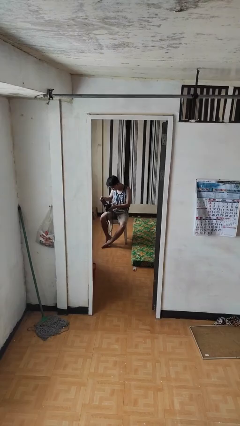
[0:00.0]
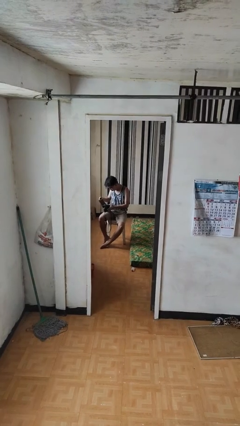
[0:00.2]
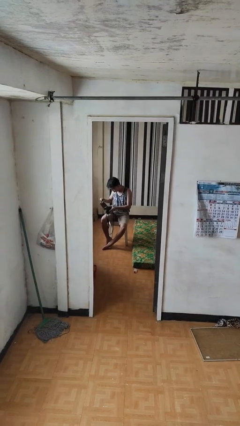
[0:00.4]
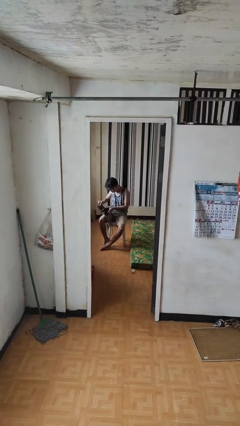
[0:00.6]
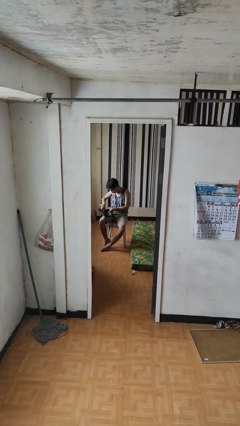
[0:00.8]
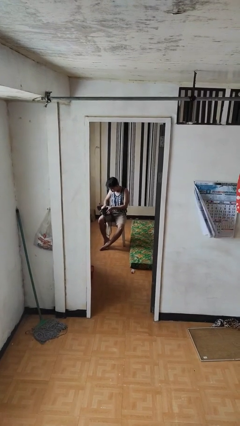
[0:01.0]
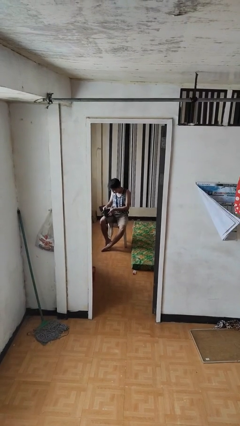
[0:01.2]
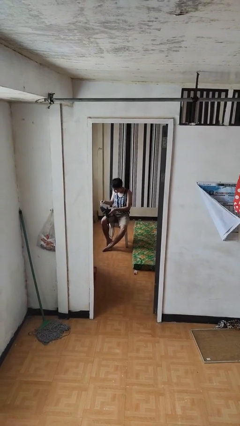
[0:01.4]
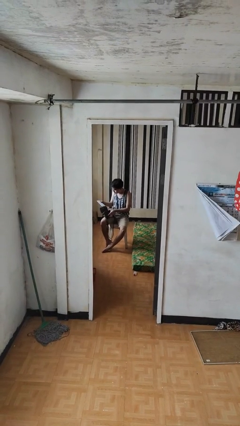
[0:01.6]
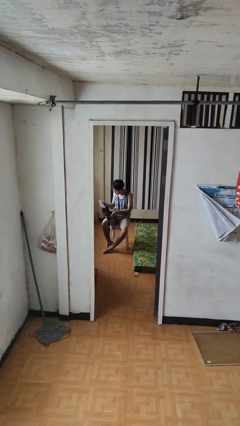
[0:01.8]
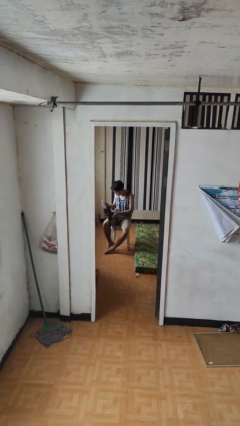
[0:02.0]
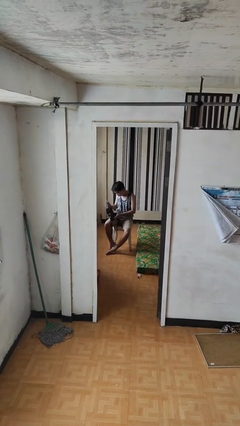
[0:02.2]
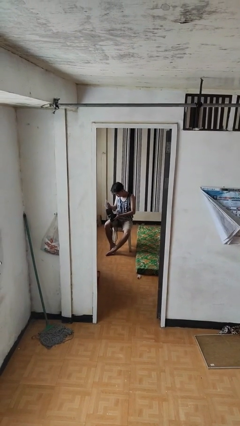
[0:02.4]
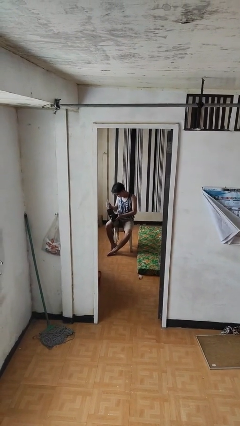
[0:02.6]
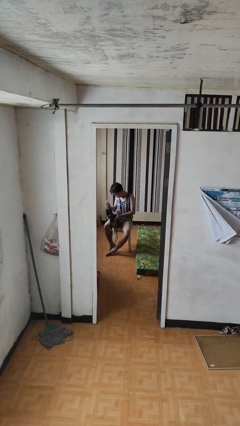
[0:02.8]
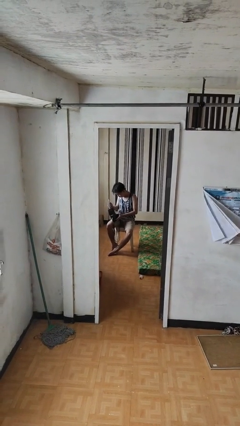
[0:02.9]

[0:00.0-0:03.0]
person takes object from purse

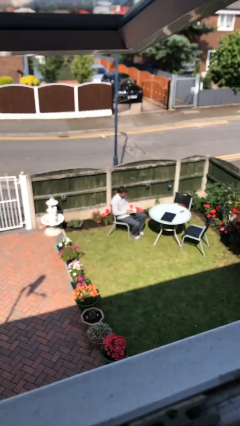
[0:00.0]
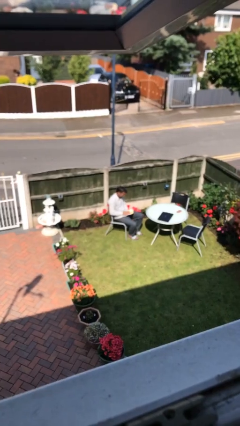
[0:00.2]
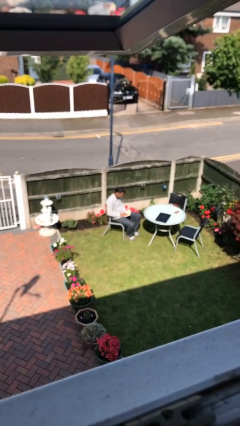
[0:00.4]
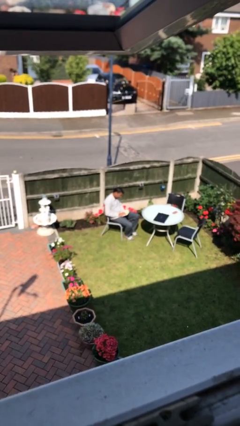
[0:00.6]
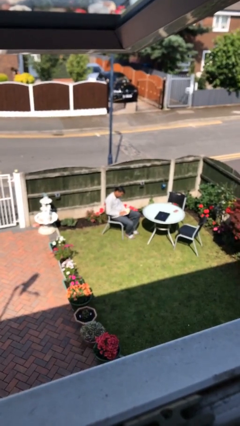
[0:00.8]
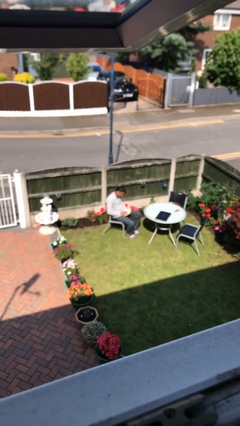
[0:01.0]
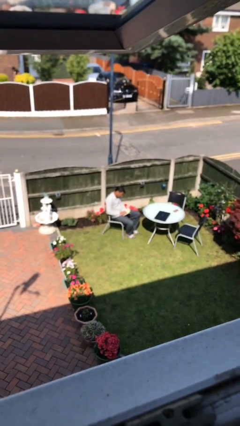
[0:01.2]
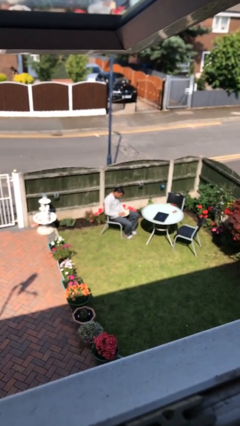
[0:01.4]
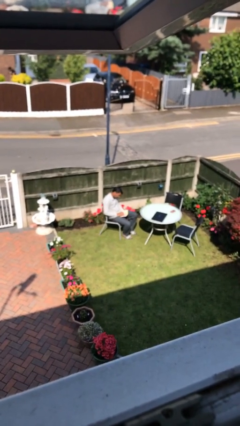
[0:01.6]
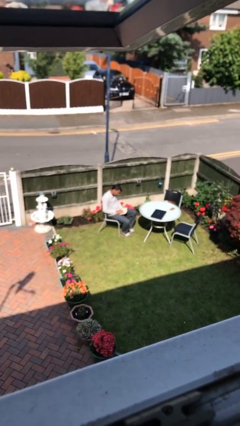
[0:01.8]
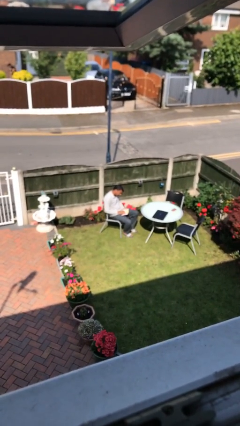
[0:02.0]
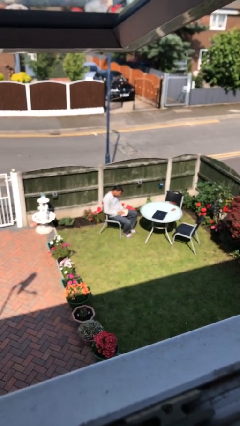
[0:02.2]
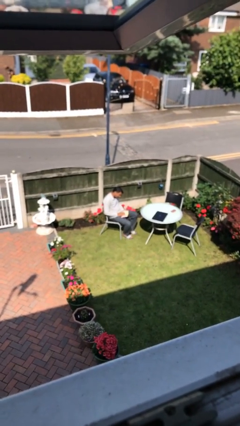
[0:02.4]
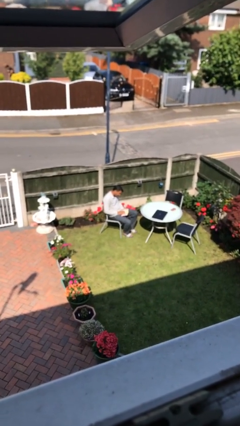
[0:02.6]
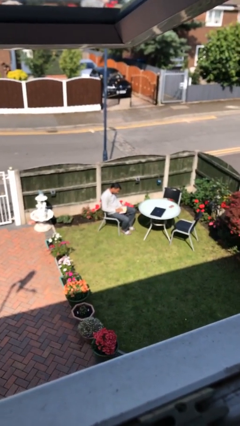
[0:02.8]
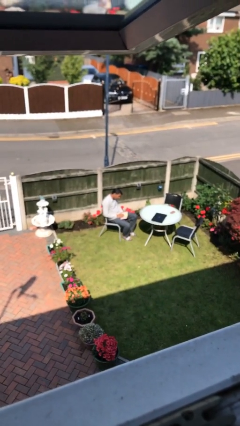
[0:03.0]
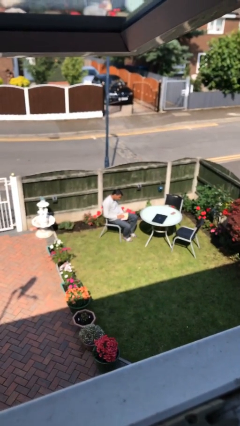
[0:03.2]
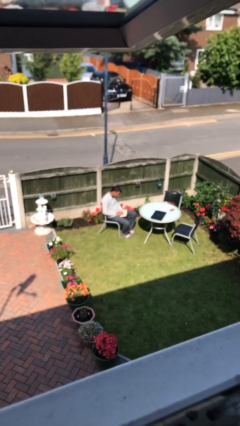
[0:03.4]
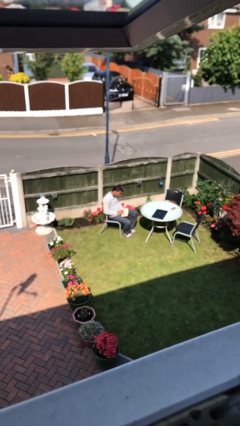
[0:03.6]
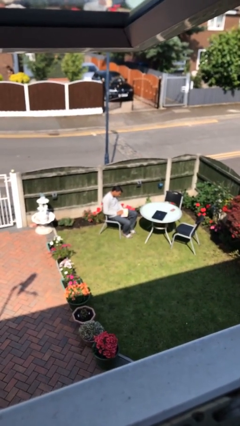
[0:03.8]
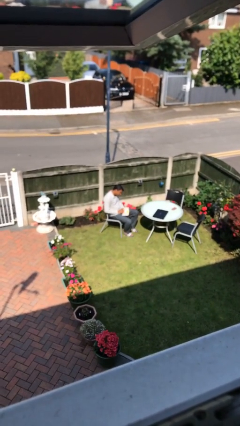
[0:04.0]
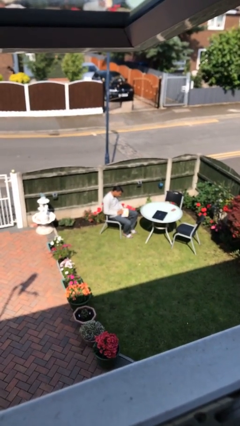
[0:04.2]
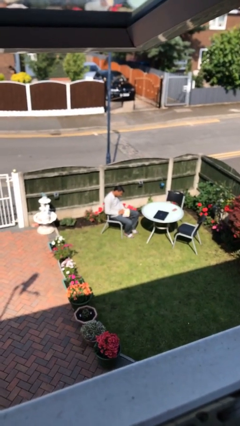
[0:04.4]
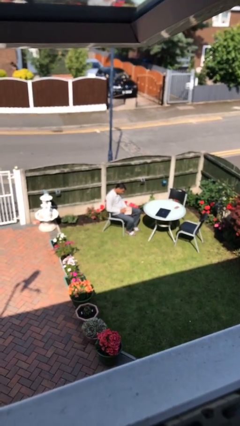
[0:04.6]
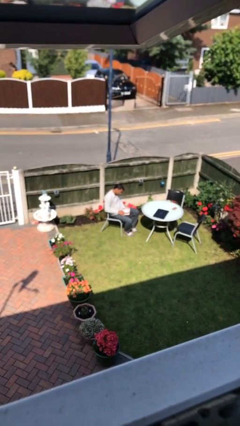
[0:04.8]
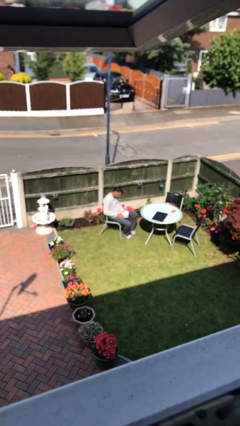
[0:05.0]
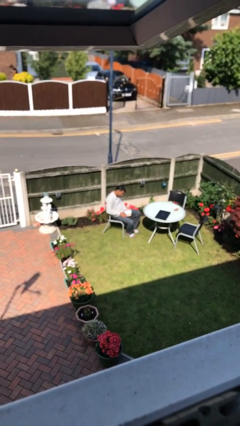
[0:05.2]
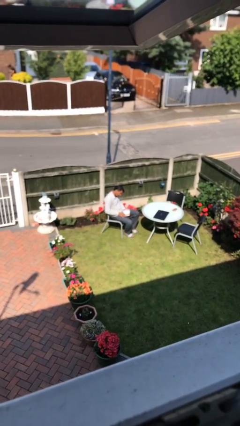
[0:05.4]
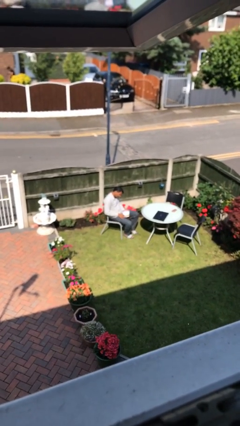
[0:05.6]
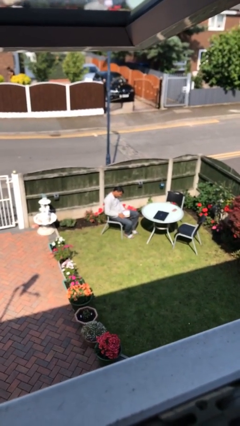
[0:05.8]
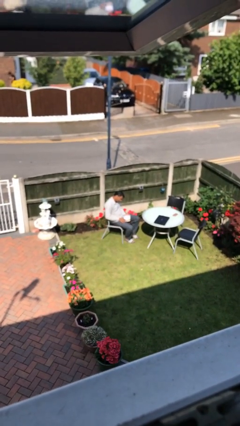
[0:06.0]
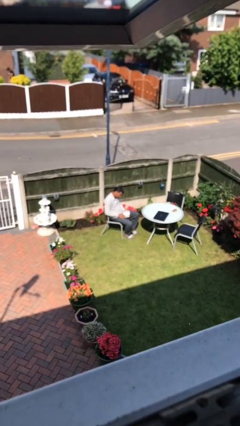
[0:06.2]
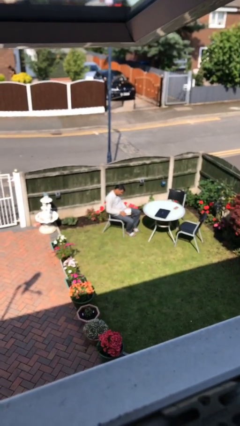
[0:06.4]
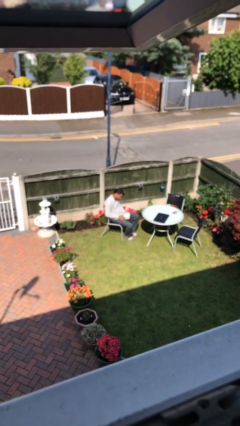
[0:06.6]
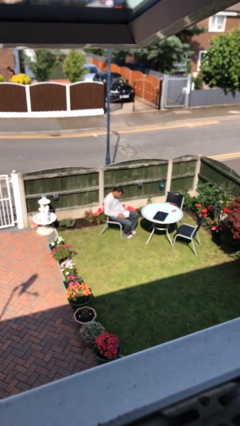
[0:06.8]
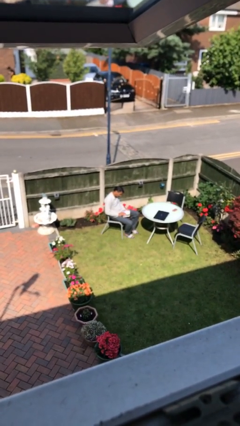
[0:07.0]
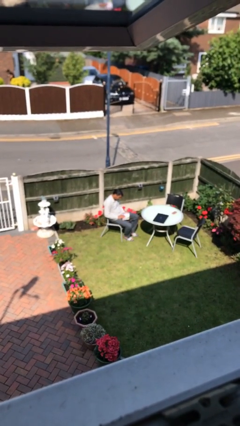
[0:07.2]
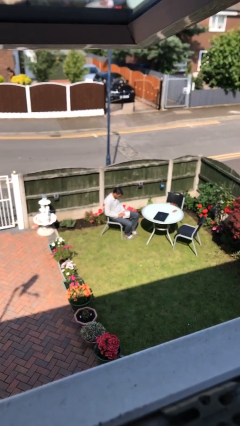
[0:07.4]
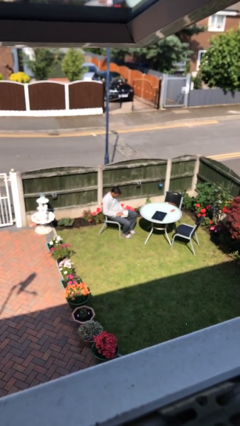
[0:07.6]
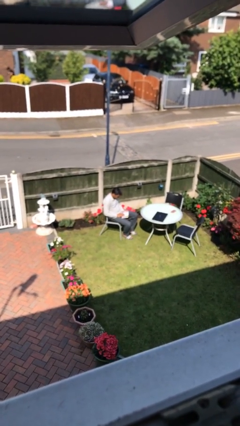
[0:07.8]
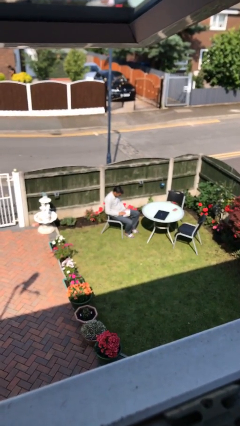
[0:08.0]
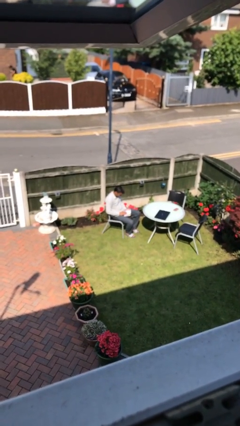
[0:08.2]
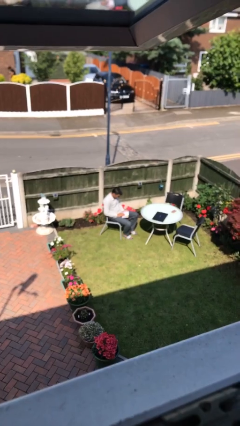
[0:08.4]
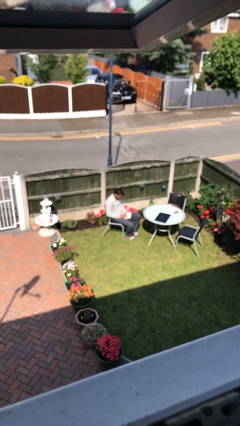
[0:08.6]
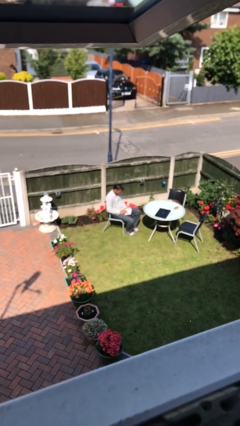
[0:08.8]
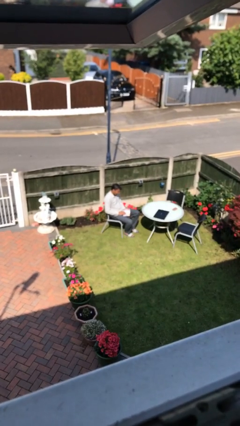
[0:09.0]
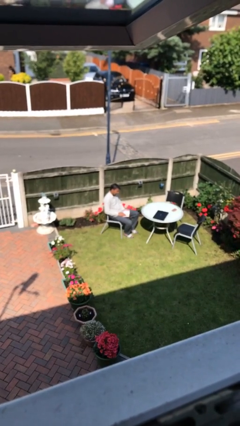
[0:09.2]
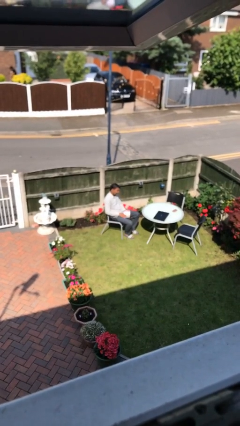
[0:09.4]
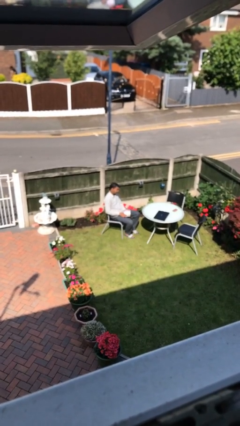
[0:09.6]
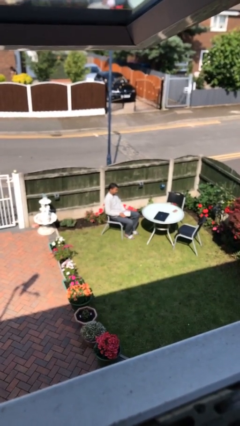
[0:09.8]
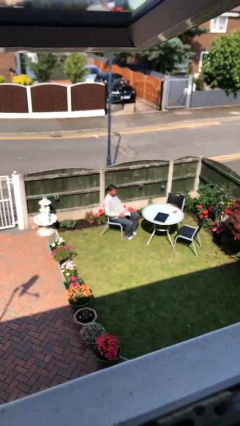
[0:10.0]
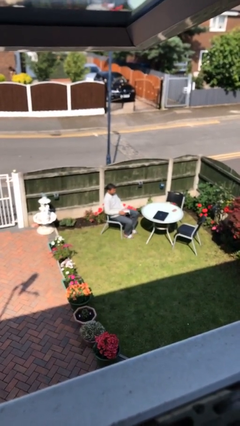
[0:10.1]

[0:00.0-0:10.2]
person reads document

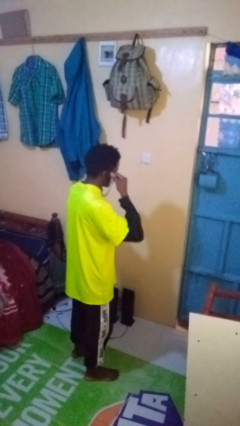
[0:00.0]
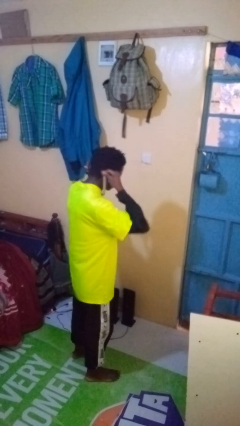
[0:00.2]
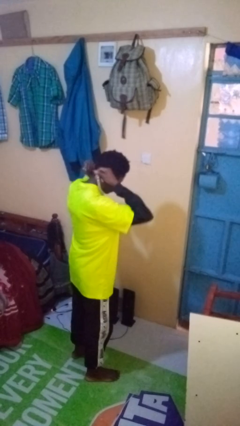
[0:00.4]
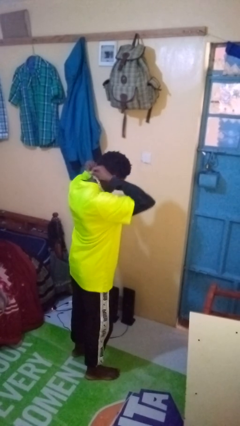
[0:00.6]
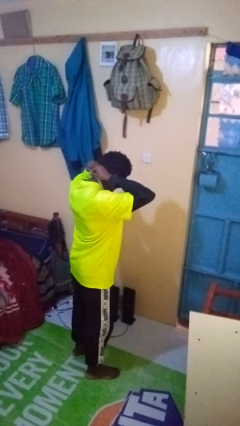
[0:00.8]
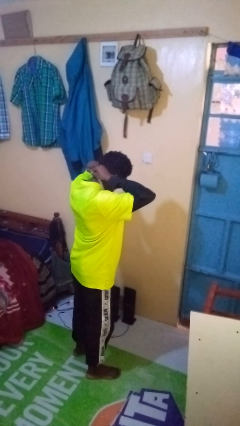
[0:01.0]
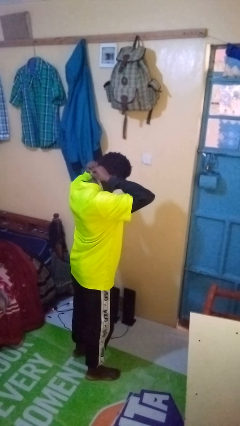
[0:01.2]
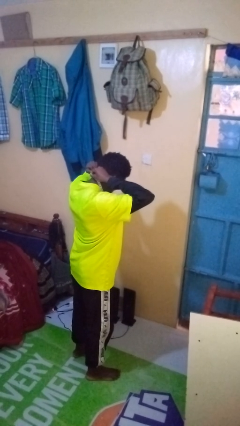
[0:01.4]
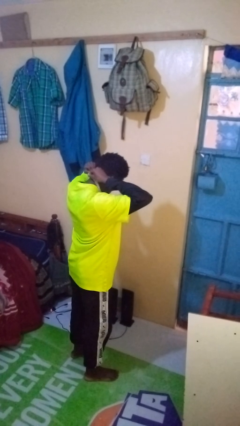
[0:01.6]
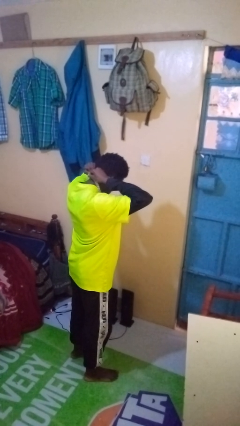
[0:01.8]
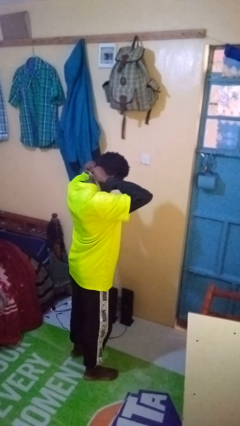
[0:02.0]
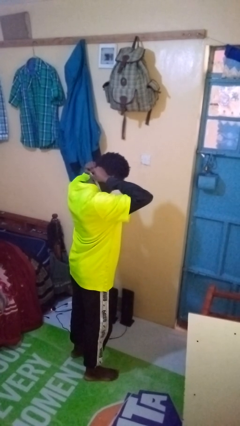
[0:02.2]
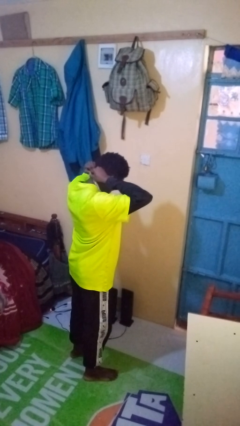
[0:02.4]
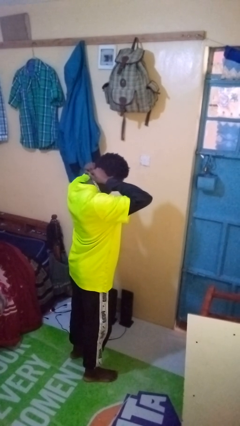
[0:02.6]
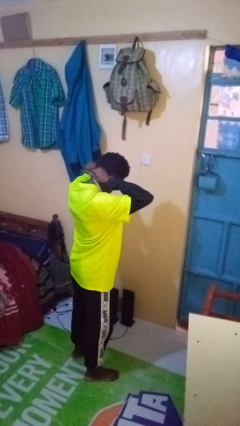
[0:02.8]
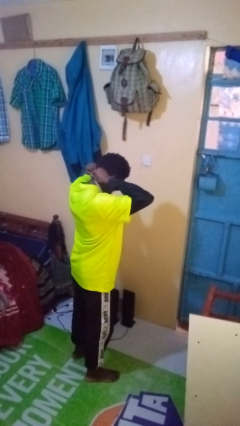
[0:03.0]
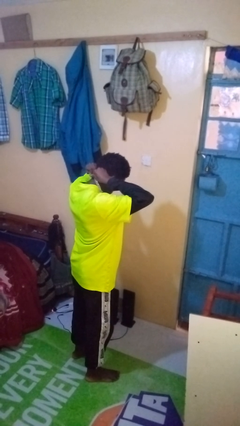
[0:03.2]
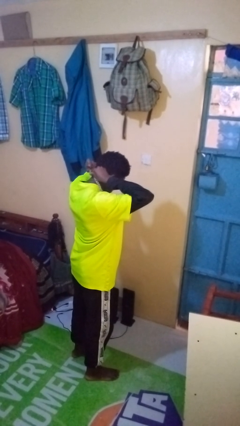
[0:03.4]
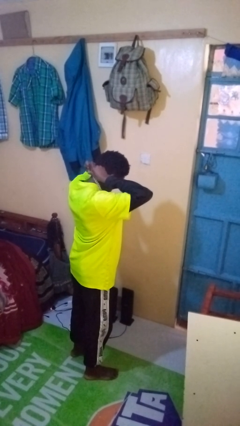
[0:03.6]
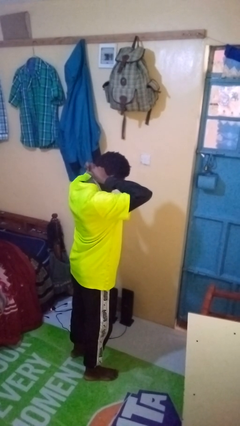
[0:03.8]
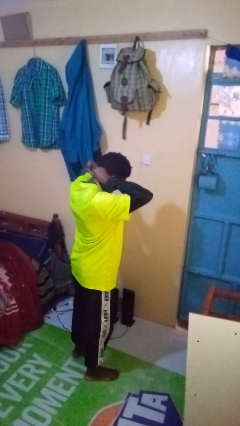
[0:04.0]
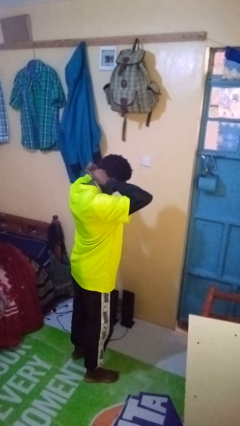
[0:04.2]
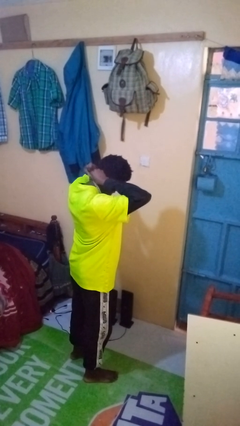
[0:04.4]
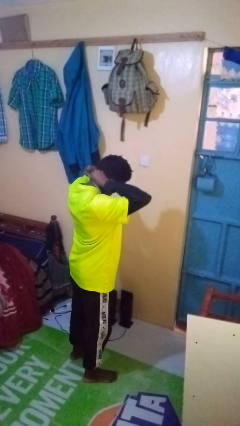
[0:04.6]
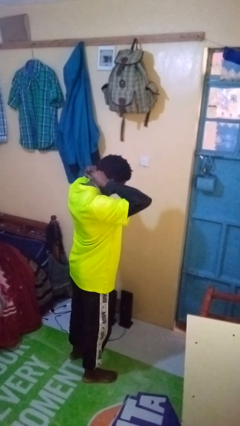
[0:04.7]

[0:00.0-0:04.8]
person puts on necklace

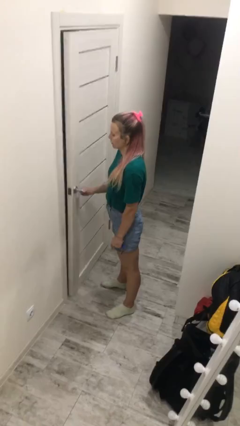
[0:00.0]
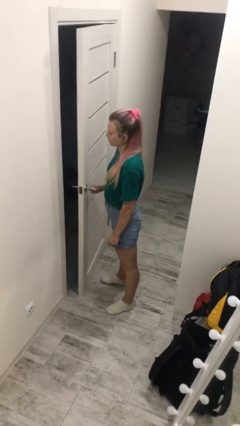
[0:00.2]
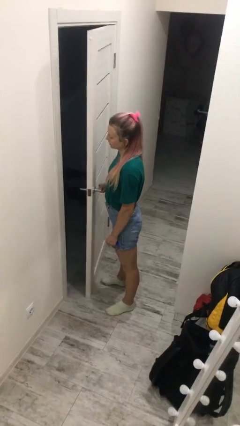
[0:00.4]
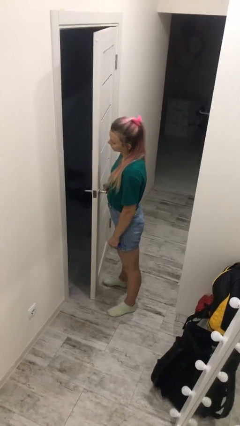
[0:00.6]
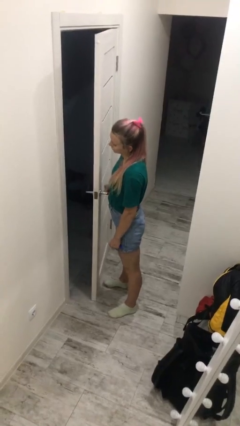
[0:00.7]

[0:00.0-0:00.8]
person opens facility door
